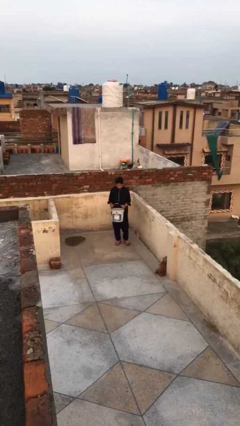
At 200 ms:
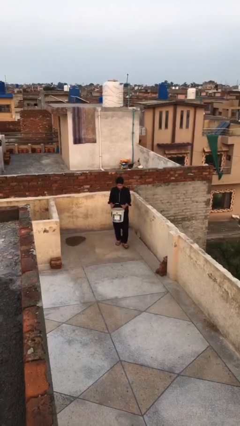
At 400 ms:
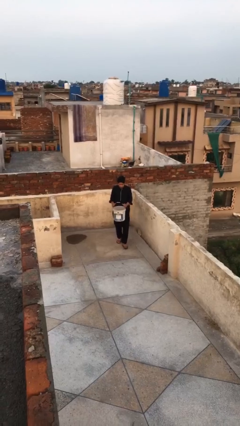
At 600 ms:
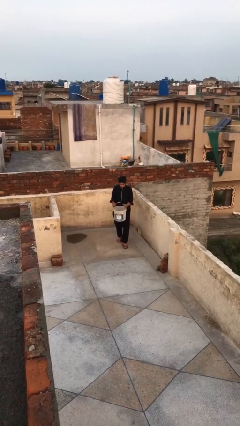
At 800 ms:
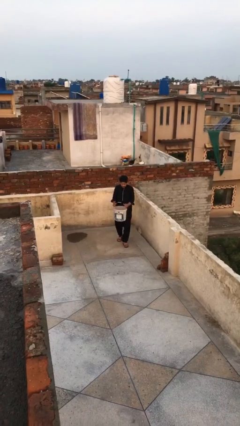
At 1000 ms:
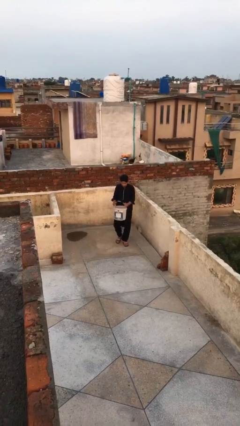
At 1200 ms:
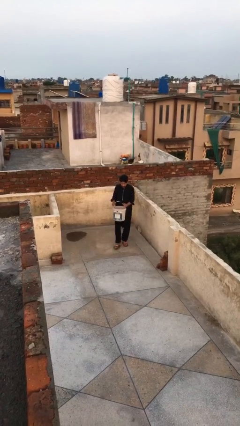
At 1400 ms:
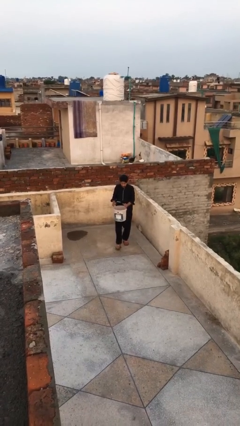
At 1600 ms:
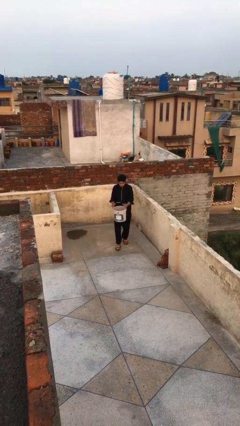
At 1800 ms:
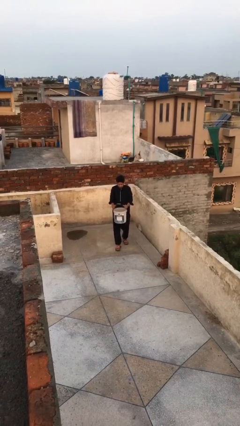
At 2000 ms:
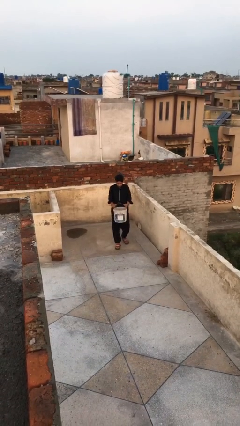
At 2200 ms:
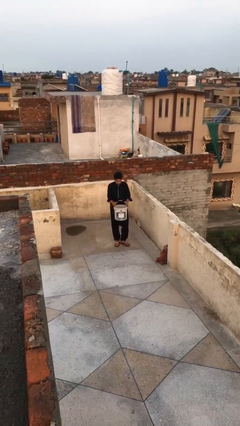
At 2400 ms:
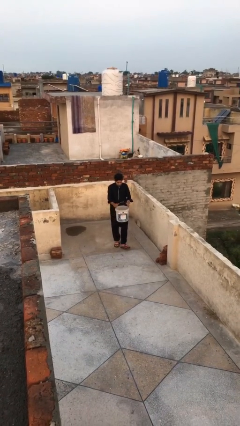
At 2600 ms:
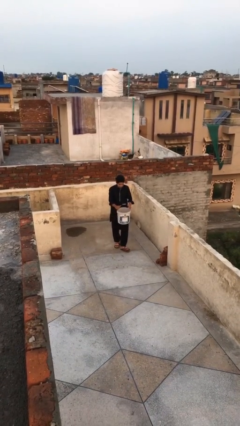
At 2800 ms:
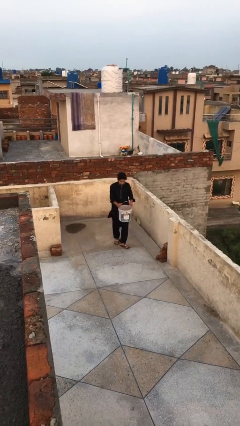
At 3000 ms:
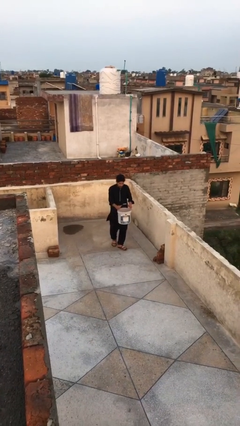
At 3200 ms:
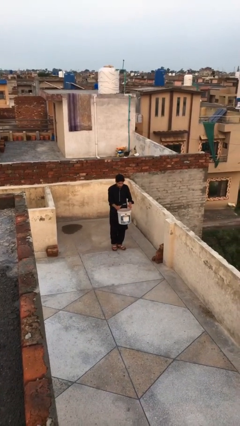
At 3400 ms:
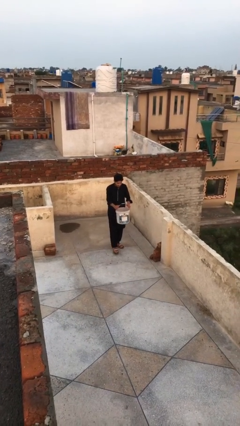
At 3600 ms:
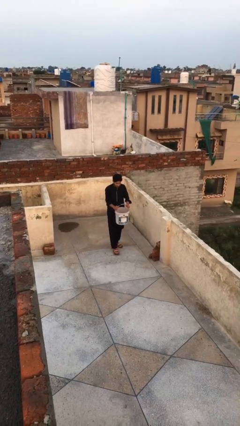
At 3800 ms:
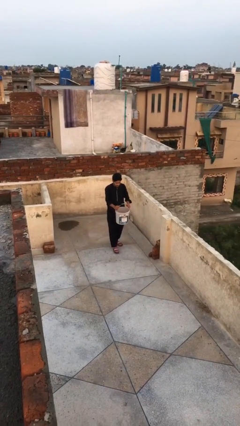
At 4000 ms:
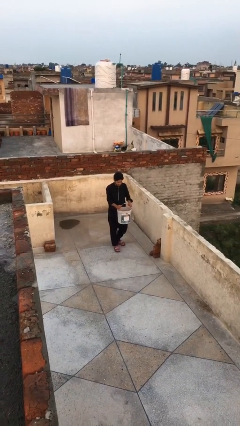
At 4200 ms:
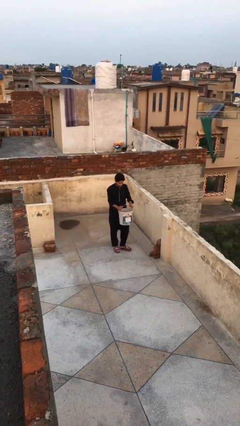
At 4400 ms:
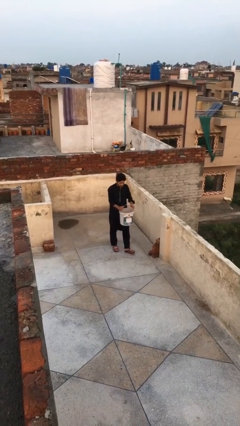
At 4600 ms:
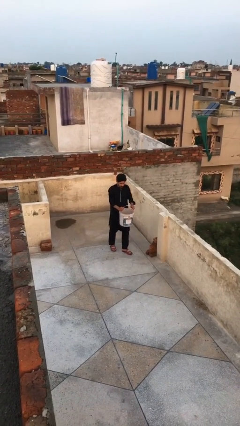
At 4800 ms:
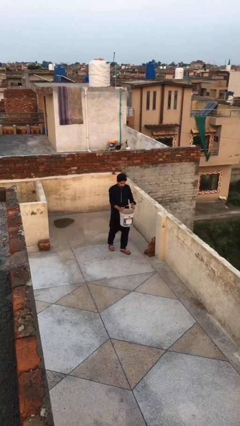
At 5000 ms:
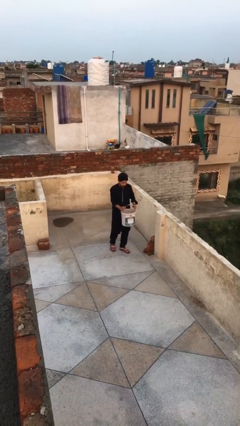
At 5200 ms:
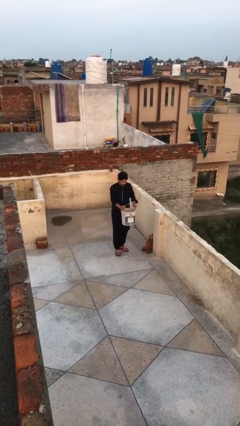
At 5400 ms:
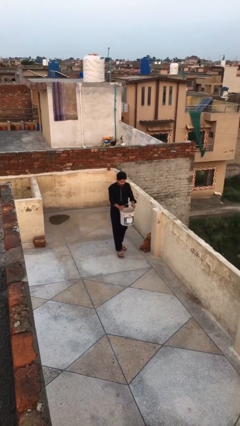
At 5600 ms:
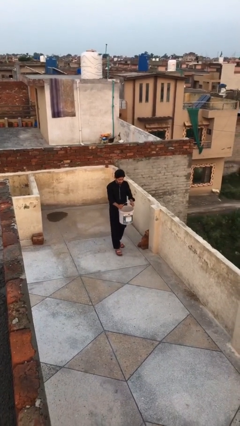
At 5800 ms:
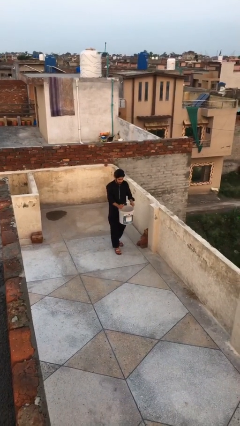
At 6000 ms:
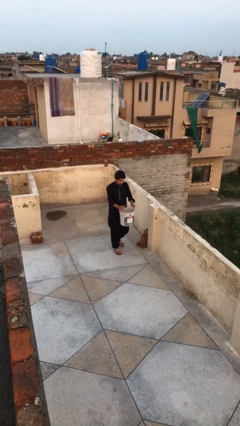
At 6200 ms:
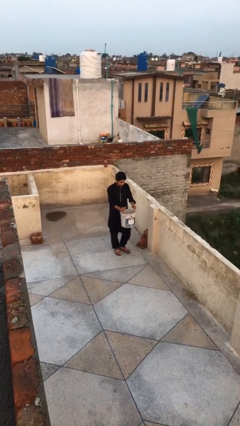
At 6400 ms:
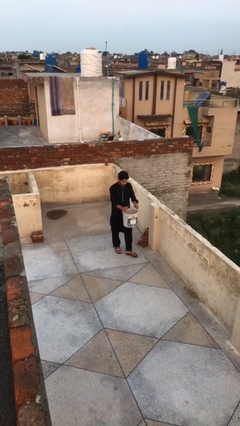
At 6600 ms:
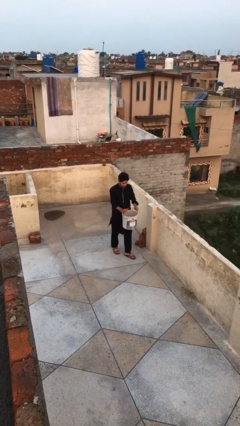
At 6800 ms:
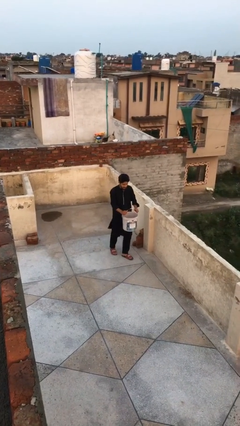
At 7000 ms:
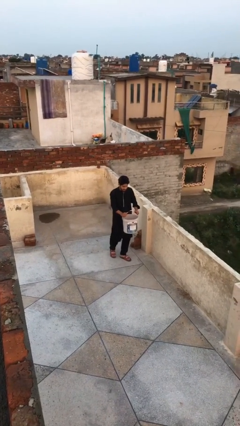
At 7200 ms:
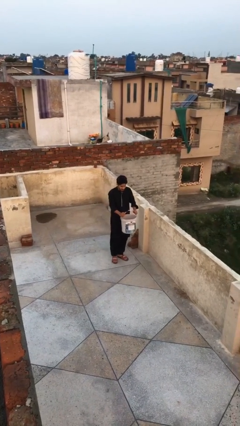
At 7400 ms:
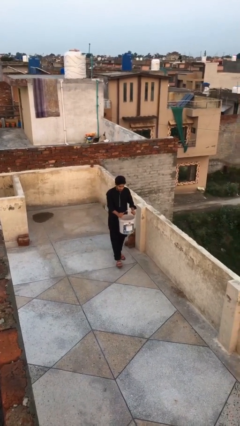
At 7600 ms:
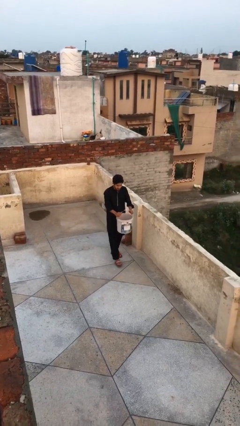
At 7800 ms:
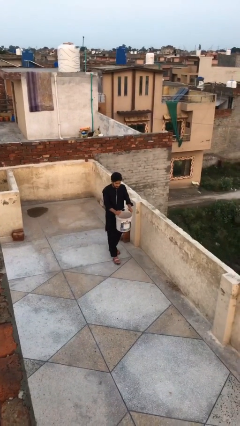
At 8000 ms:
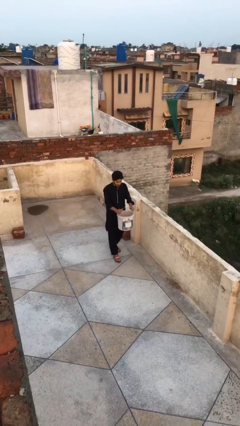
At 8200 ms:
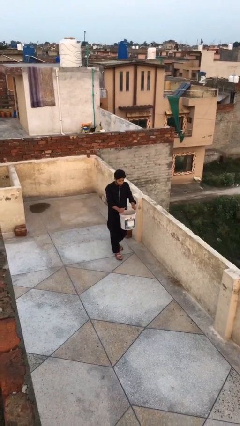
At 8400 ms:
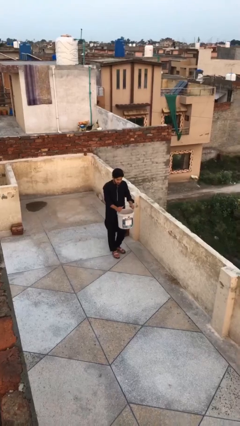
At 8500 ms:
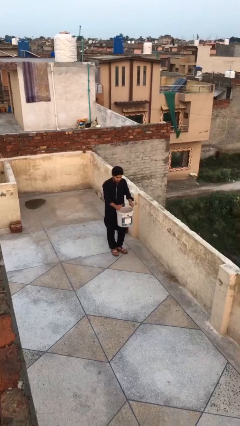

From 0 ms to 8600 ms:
person carries heavy object

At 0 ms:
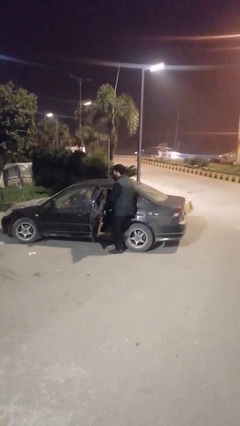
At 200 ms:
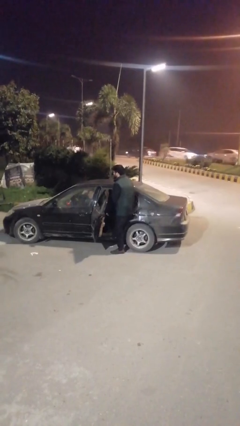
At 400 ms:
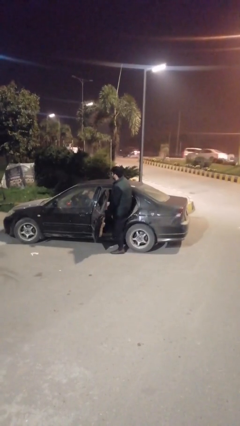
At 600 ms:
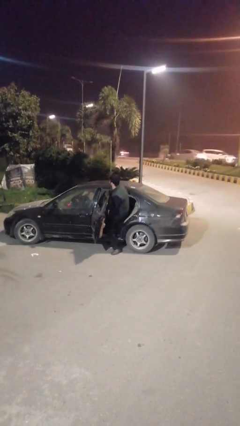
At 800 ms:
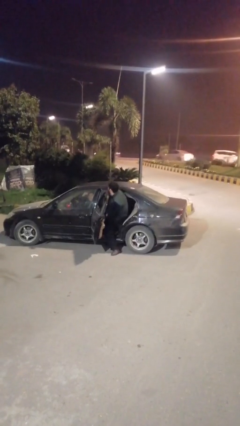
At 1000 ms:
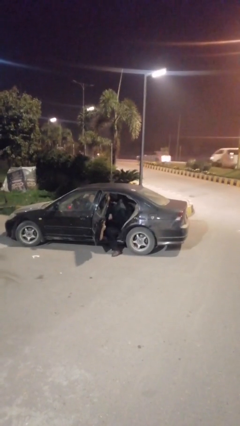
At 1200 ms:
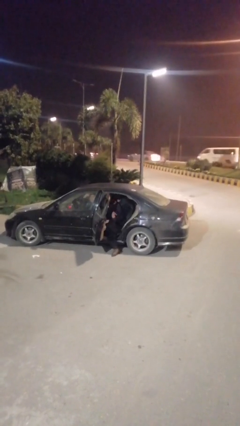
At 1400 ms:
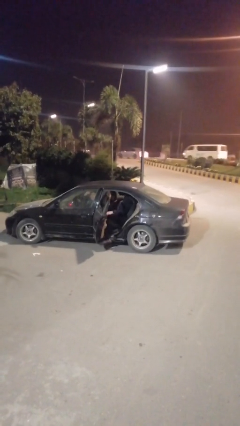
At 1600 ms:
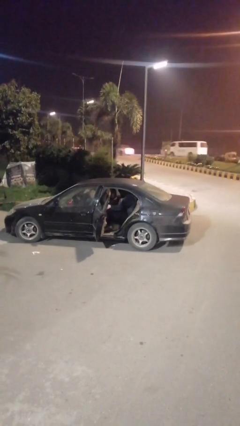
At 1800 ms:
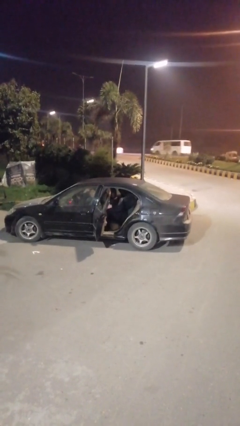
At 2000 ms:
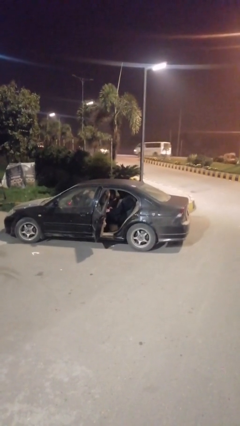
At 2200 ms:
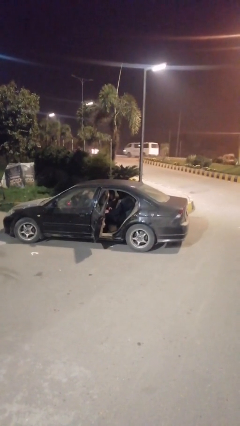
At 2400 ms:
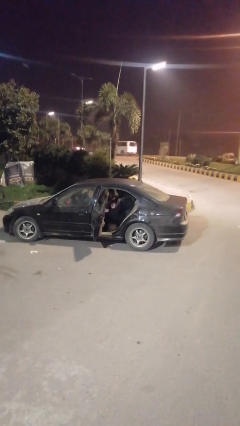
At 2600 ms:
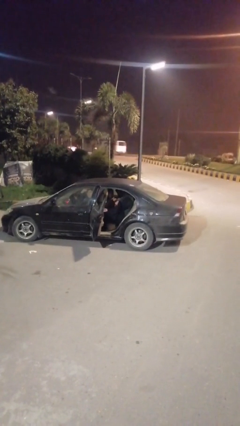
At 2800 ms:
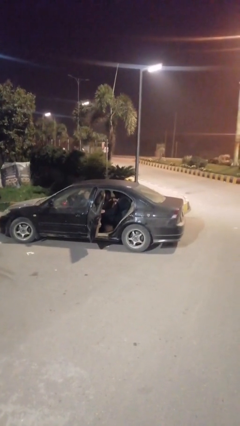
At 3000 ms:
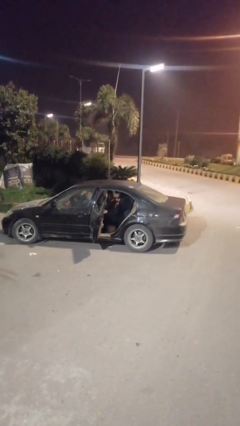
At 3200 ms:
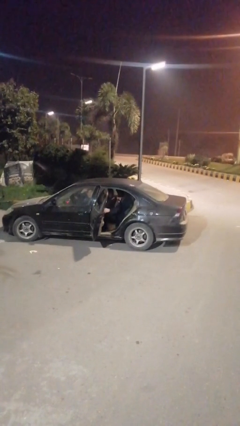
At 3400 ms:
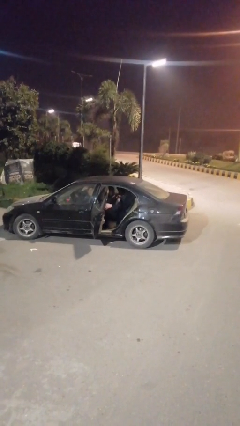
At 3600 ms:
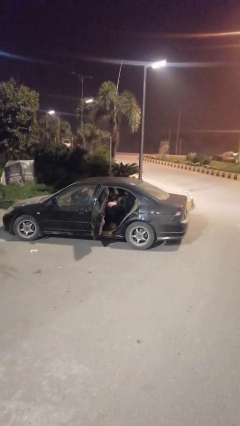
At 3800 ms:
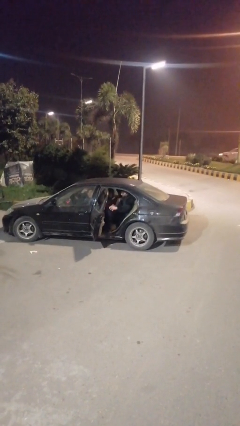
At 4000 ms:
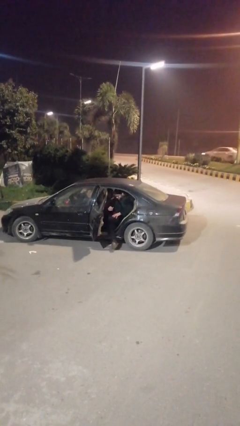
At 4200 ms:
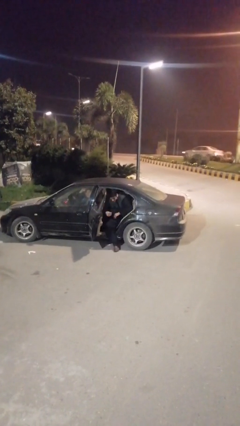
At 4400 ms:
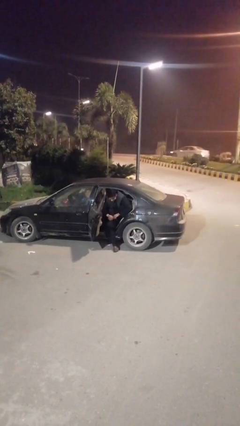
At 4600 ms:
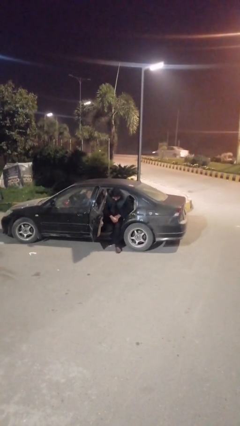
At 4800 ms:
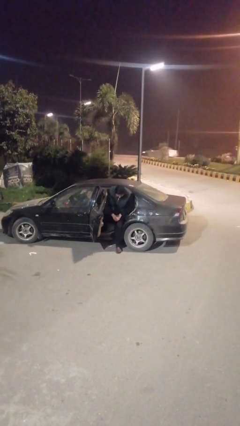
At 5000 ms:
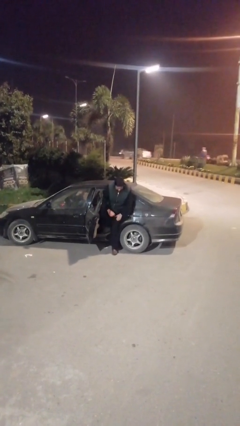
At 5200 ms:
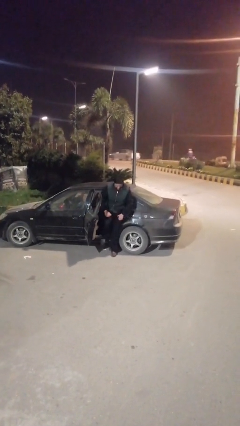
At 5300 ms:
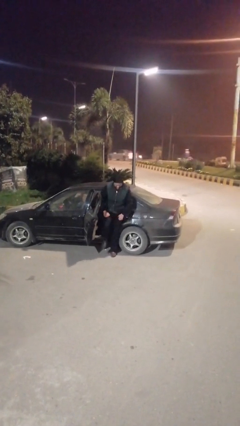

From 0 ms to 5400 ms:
person enters car

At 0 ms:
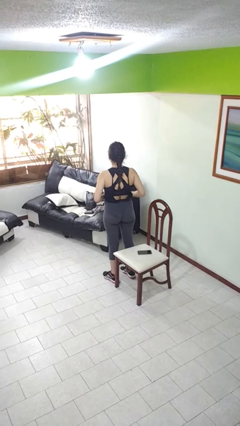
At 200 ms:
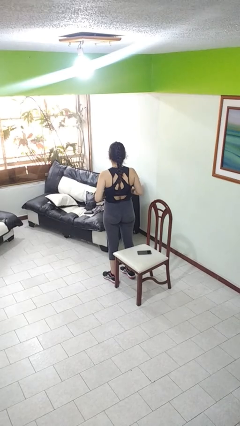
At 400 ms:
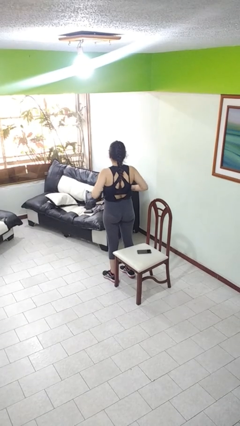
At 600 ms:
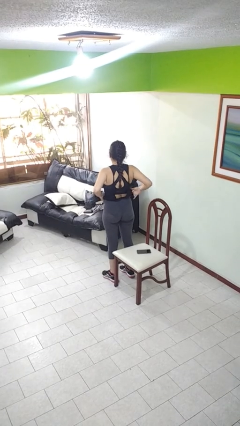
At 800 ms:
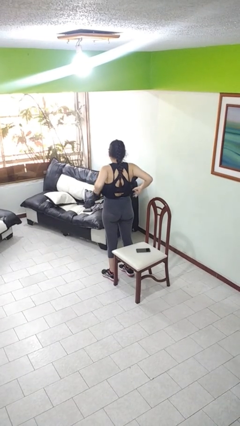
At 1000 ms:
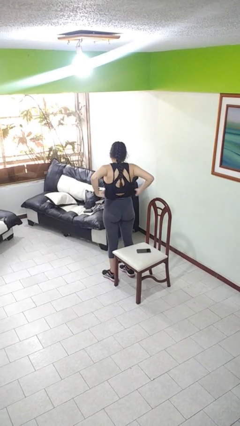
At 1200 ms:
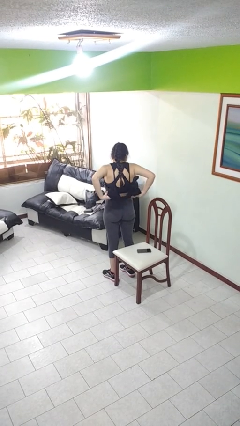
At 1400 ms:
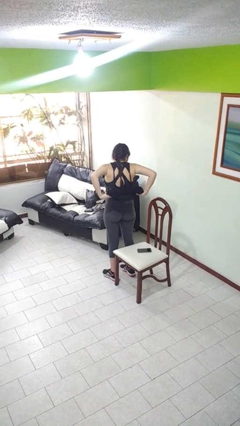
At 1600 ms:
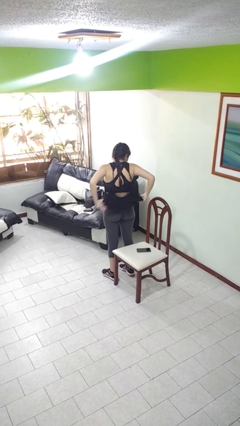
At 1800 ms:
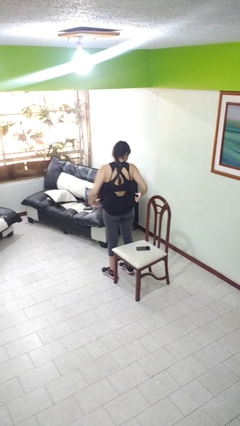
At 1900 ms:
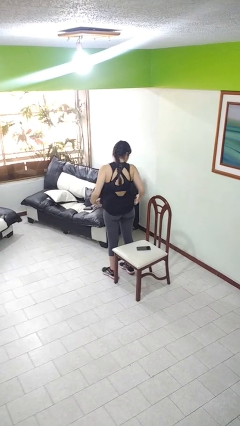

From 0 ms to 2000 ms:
person untucks shirt

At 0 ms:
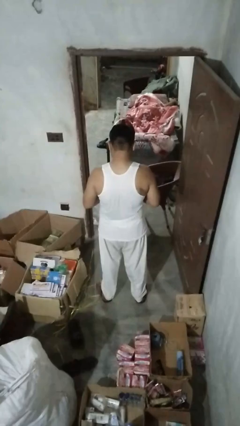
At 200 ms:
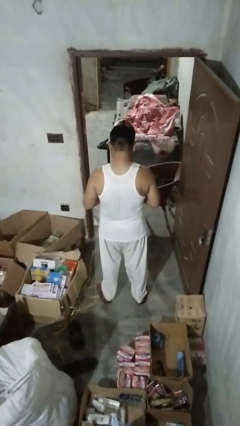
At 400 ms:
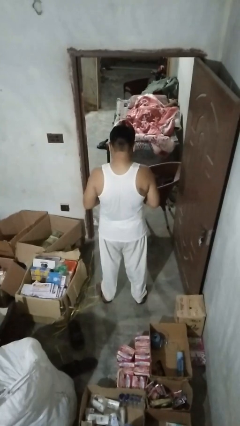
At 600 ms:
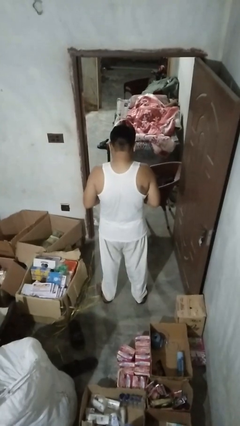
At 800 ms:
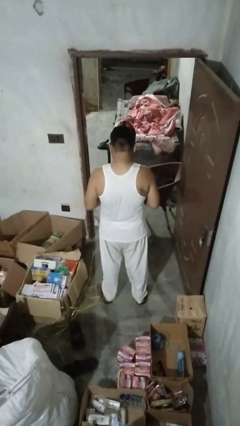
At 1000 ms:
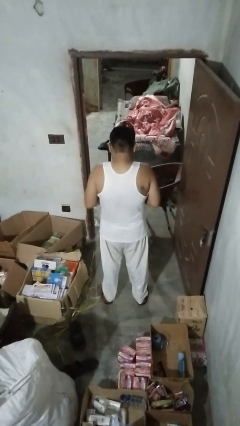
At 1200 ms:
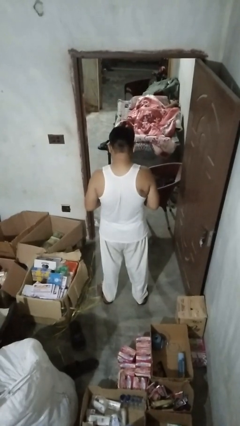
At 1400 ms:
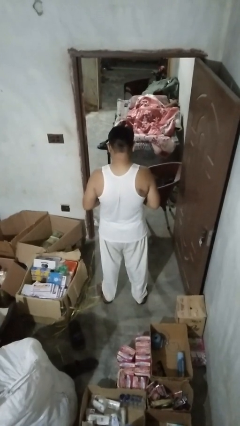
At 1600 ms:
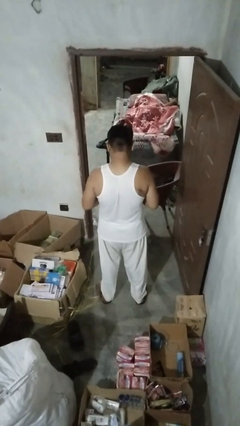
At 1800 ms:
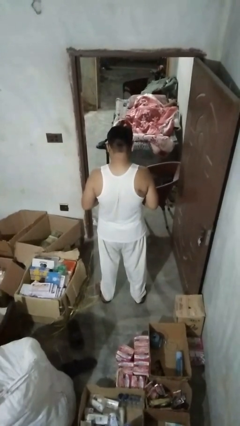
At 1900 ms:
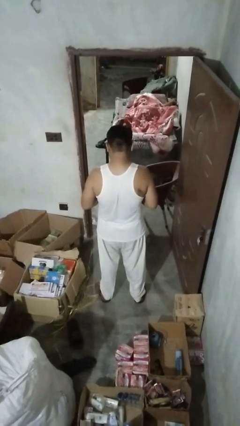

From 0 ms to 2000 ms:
person shrugs
